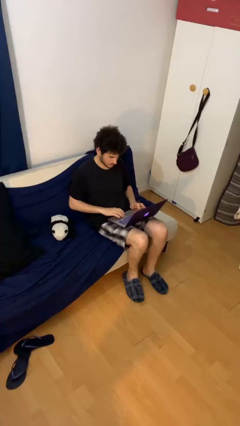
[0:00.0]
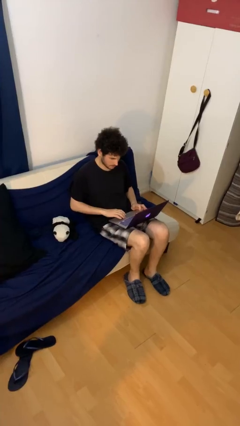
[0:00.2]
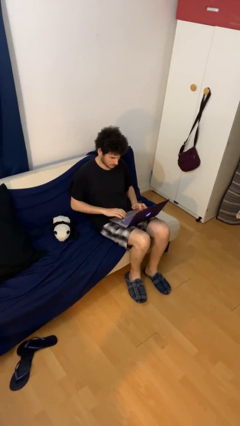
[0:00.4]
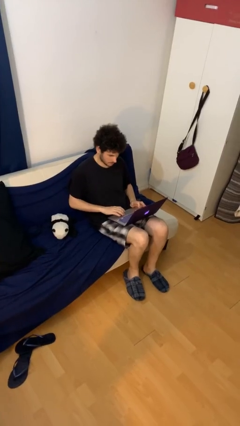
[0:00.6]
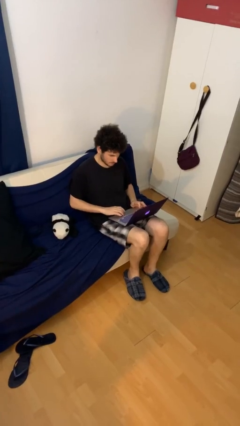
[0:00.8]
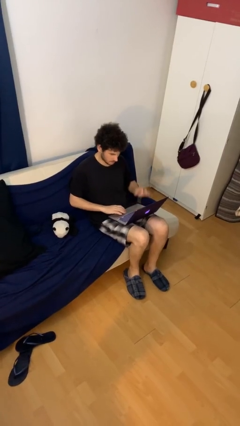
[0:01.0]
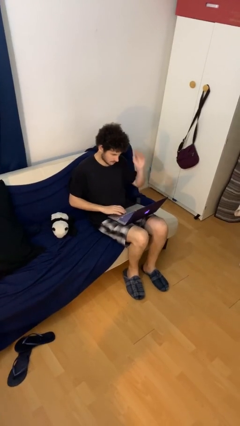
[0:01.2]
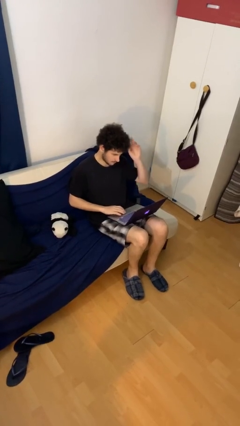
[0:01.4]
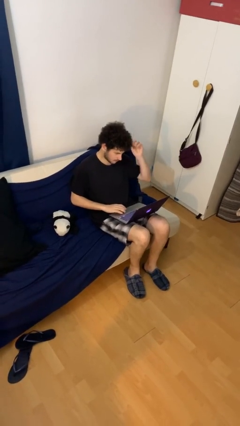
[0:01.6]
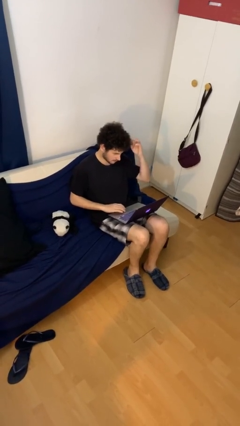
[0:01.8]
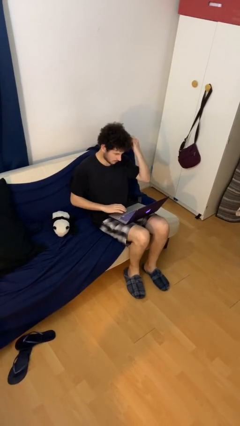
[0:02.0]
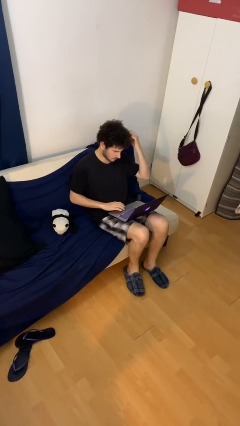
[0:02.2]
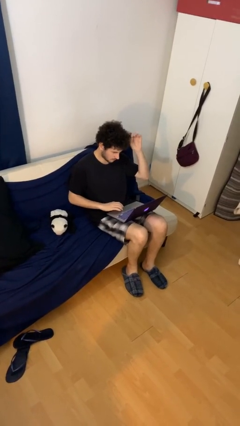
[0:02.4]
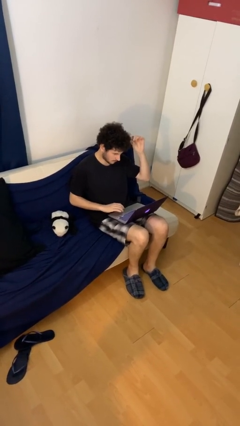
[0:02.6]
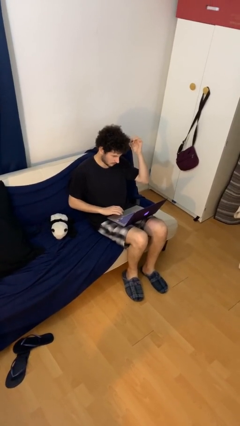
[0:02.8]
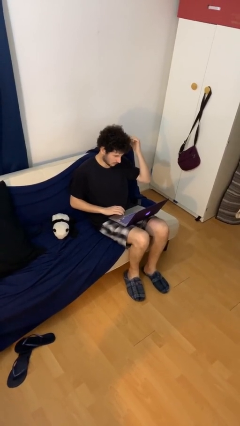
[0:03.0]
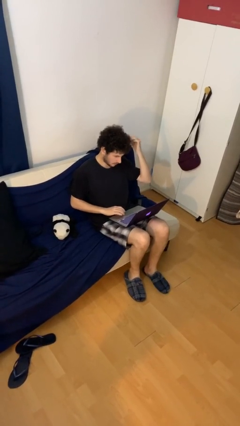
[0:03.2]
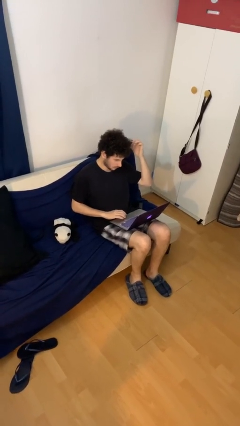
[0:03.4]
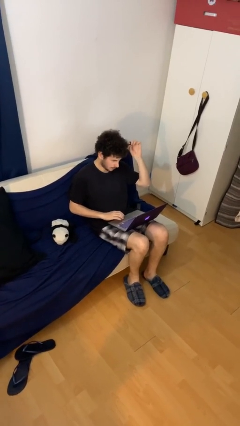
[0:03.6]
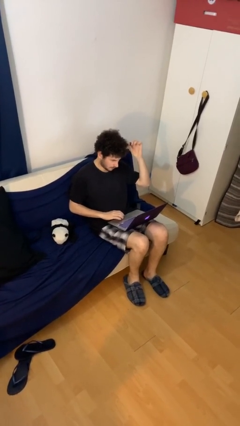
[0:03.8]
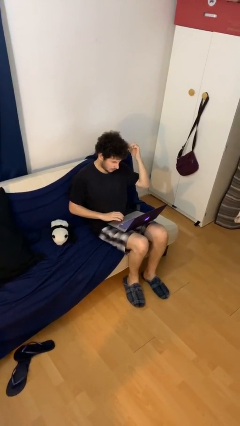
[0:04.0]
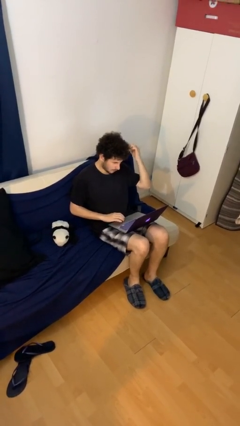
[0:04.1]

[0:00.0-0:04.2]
person interacts with laptop

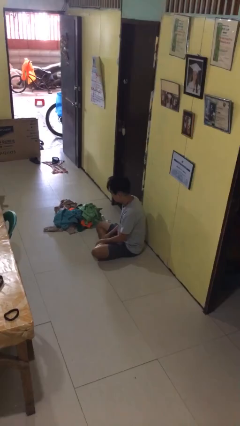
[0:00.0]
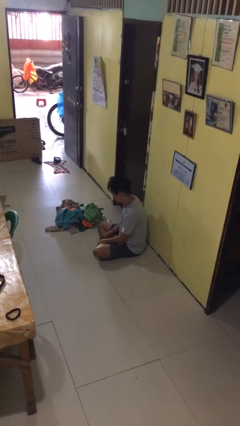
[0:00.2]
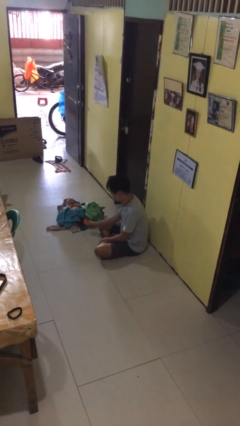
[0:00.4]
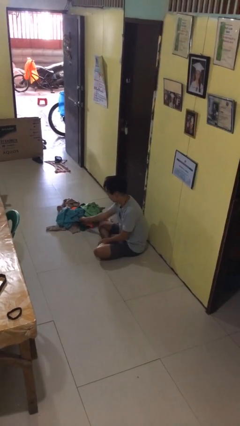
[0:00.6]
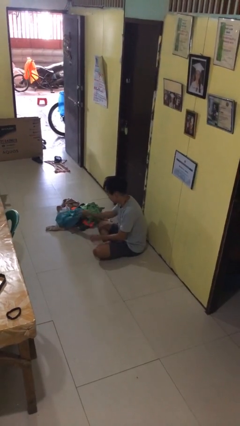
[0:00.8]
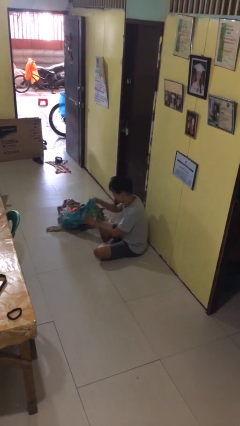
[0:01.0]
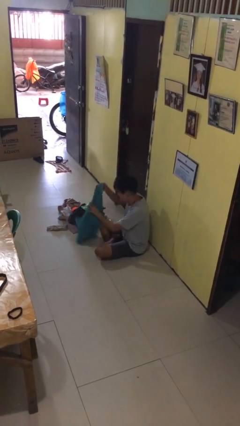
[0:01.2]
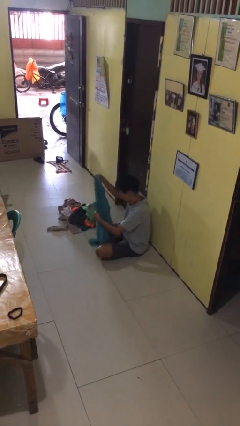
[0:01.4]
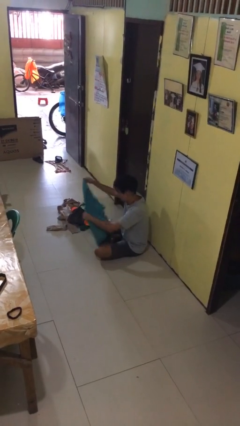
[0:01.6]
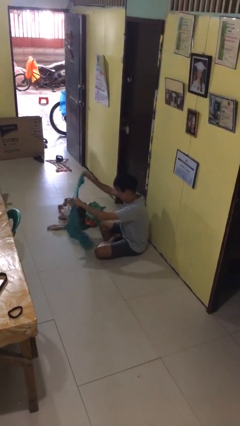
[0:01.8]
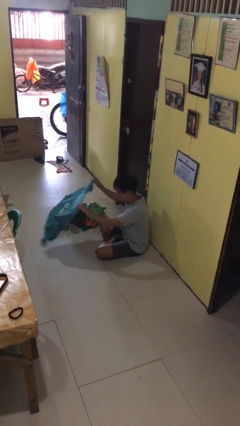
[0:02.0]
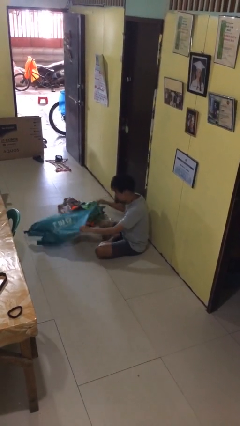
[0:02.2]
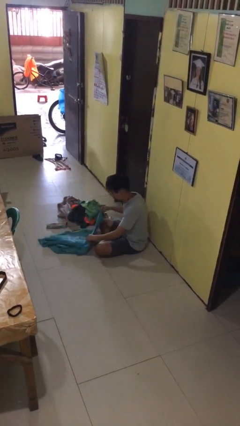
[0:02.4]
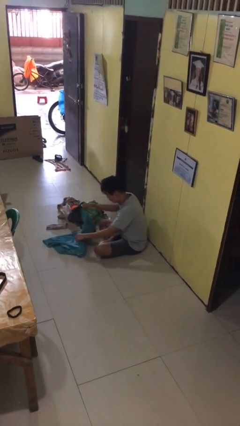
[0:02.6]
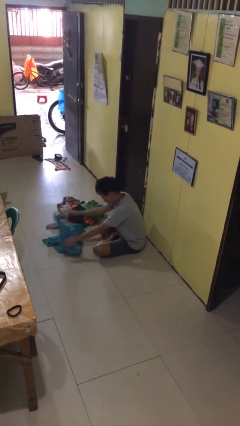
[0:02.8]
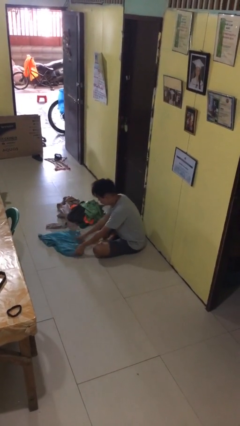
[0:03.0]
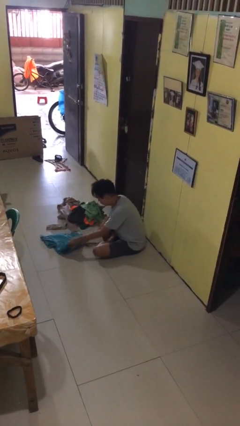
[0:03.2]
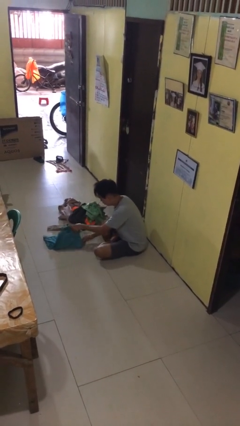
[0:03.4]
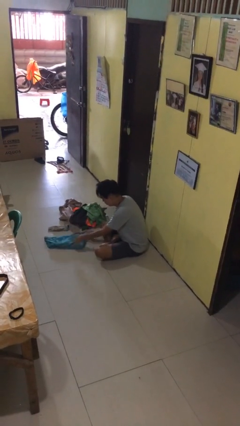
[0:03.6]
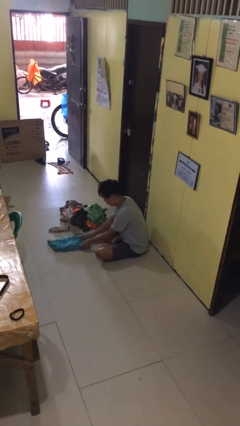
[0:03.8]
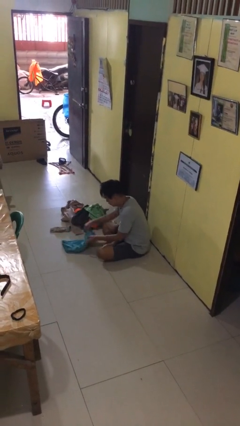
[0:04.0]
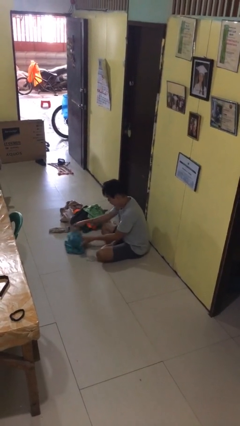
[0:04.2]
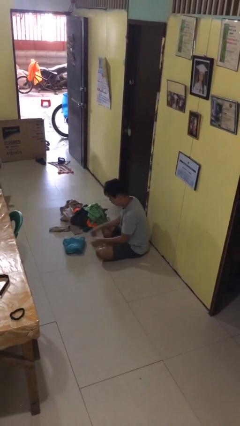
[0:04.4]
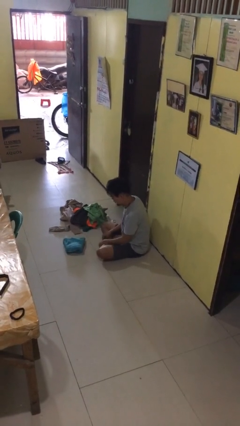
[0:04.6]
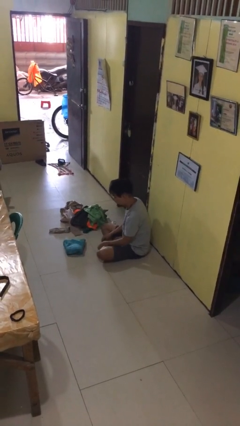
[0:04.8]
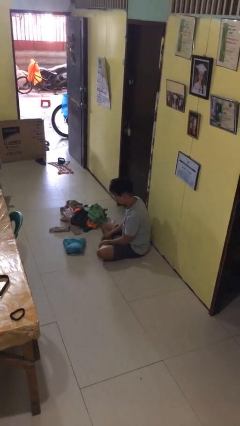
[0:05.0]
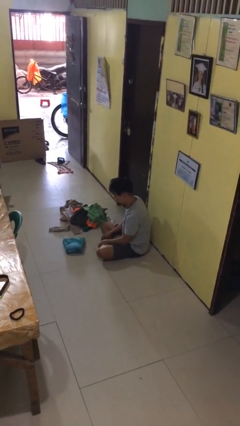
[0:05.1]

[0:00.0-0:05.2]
person folds shirt

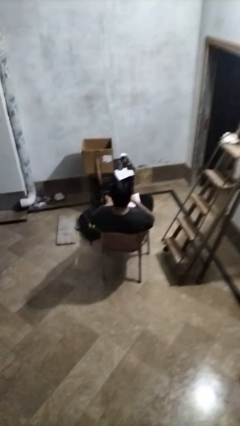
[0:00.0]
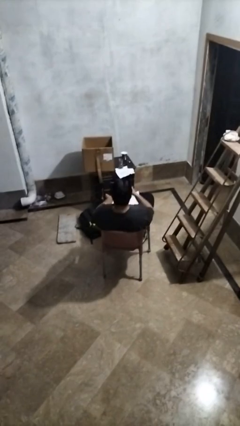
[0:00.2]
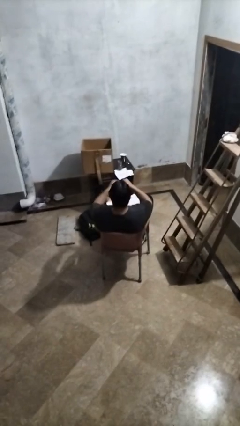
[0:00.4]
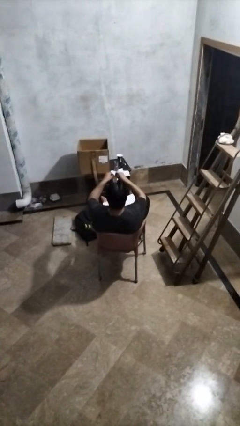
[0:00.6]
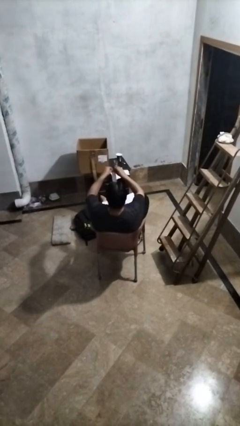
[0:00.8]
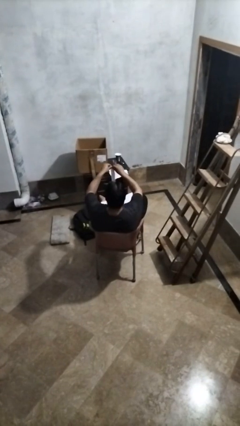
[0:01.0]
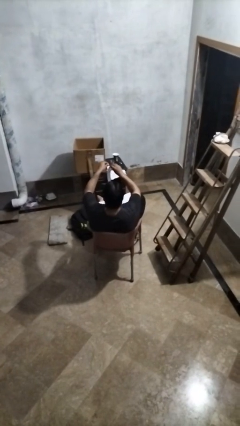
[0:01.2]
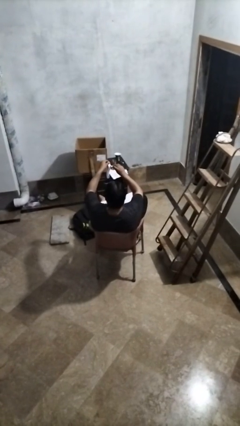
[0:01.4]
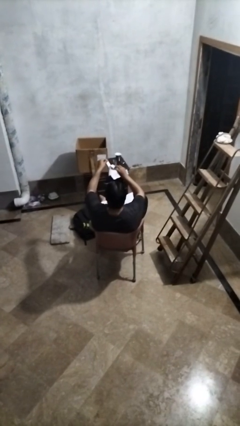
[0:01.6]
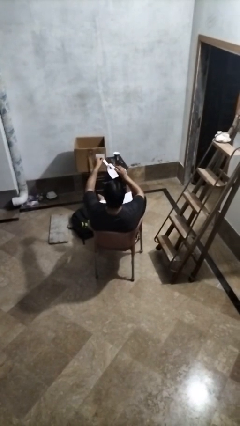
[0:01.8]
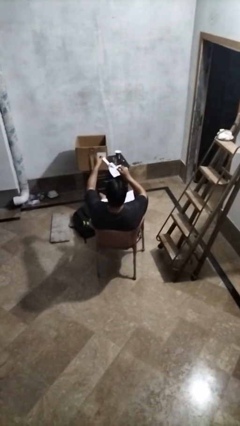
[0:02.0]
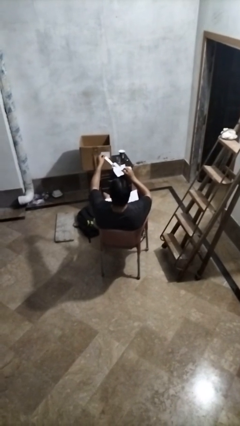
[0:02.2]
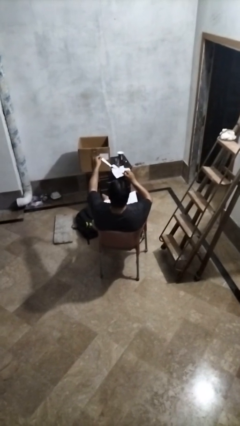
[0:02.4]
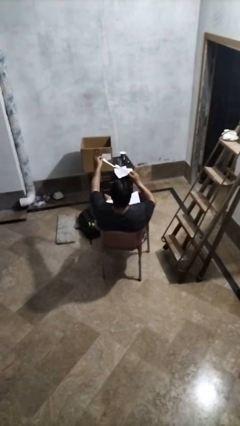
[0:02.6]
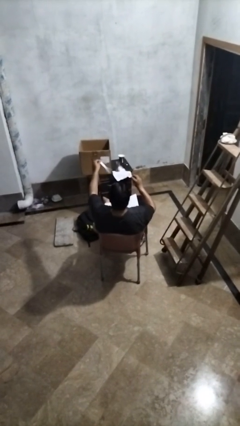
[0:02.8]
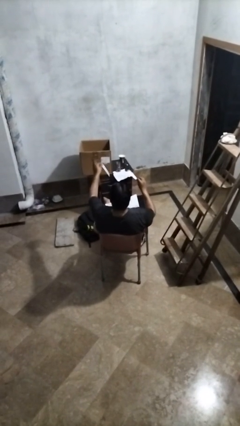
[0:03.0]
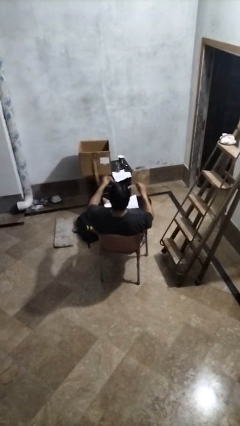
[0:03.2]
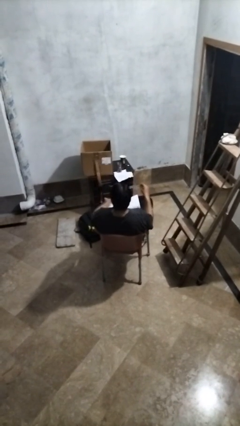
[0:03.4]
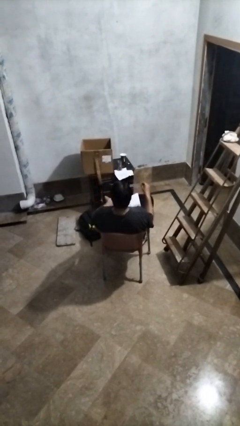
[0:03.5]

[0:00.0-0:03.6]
person tears paper

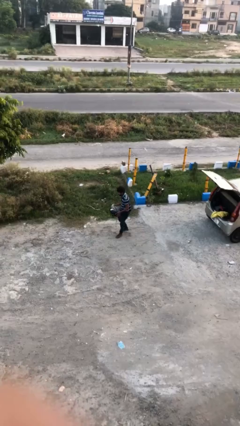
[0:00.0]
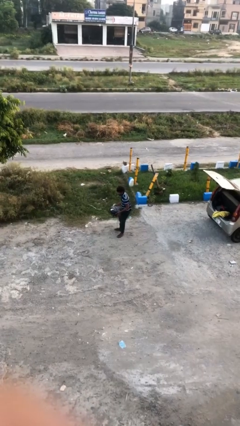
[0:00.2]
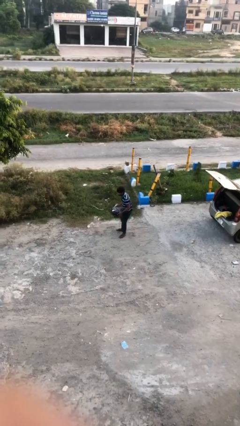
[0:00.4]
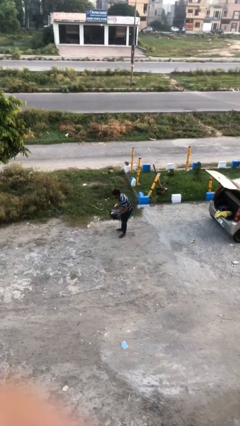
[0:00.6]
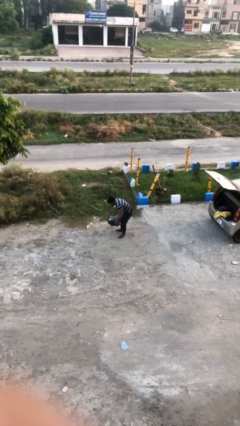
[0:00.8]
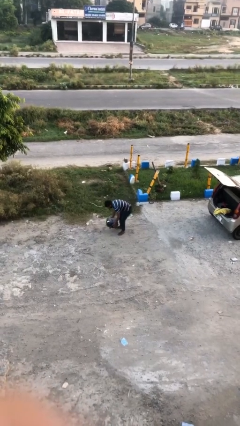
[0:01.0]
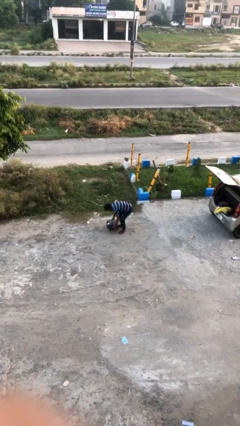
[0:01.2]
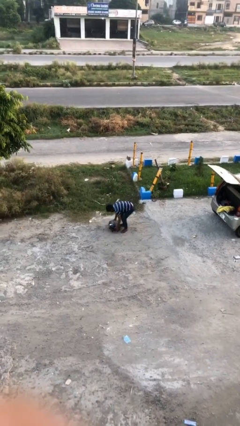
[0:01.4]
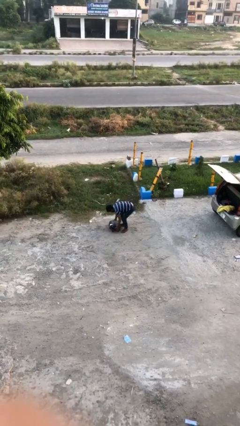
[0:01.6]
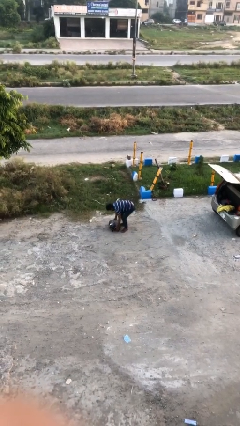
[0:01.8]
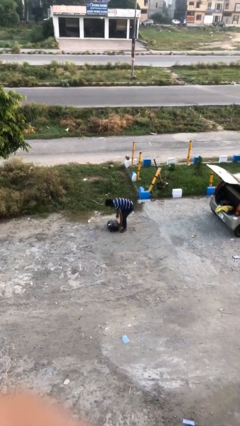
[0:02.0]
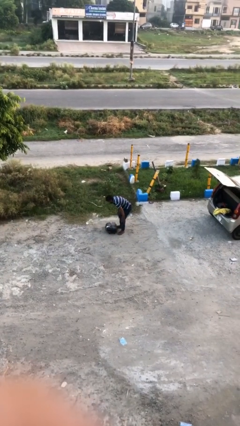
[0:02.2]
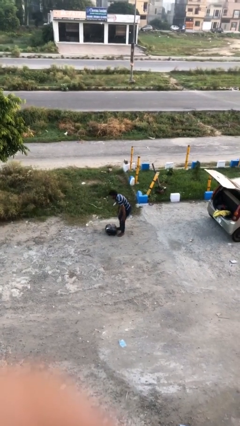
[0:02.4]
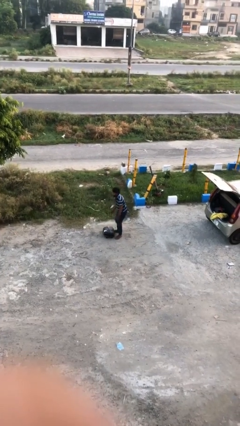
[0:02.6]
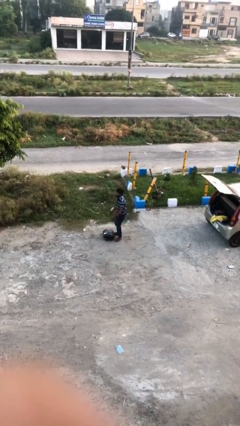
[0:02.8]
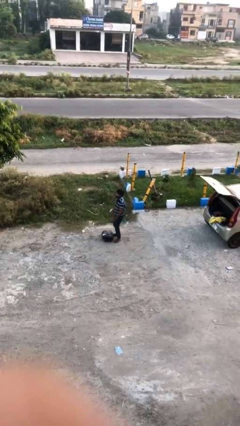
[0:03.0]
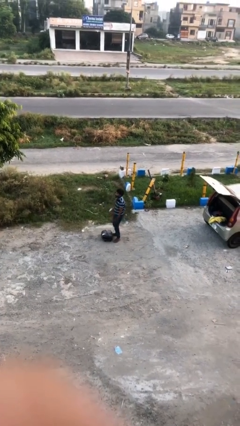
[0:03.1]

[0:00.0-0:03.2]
person puts down object on floor

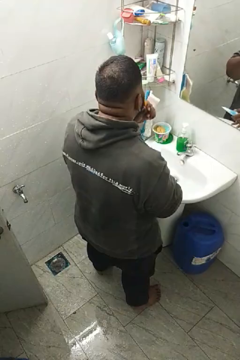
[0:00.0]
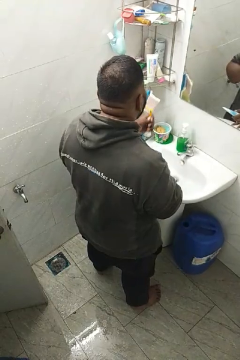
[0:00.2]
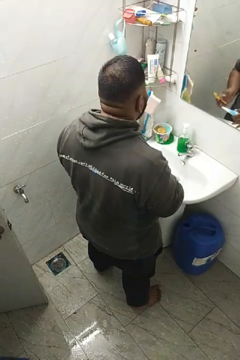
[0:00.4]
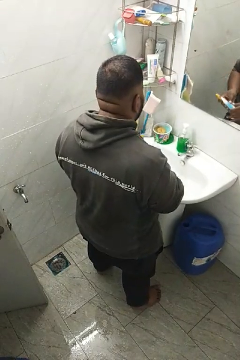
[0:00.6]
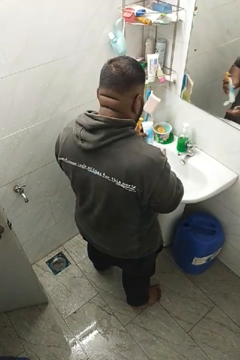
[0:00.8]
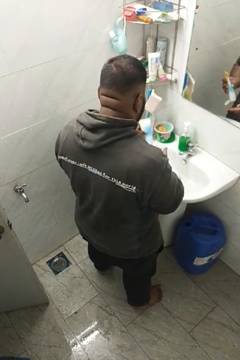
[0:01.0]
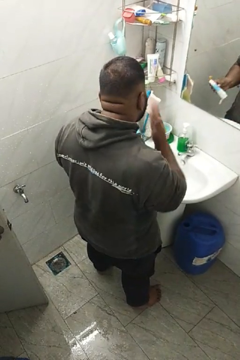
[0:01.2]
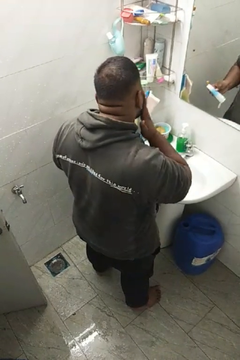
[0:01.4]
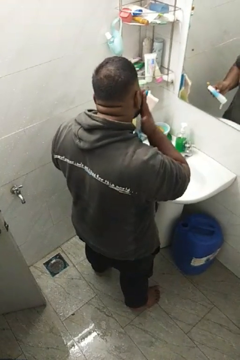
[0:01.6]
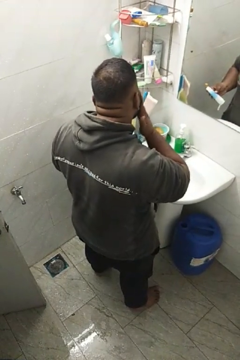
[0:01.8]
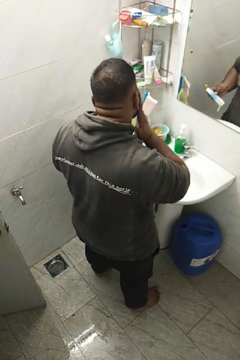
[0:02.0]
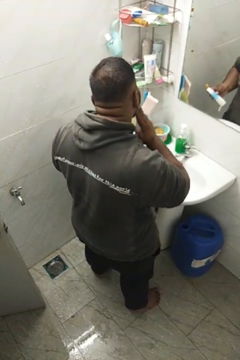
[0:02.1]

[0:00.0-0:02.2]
person applies shaving cream
